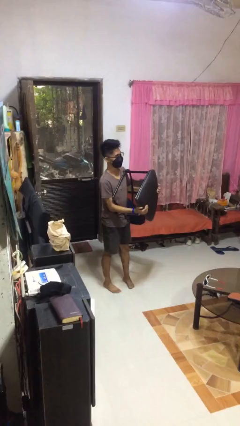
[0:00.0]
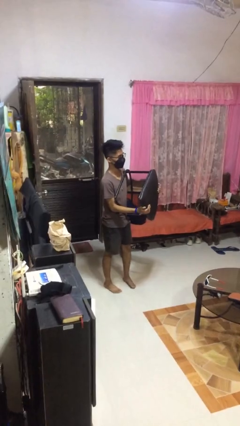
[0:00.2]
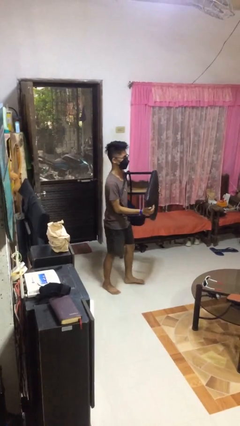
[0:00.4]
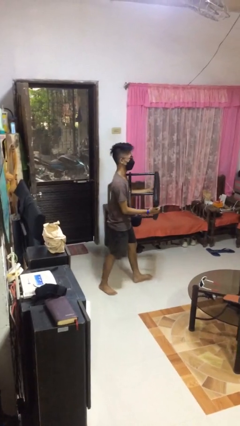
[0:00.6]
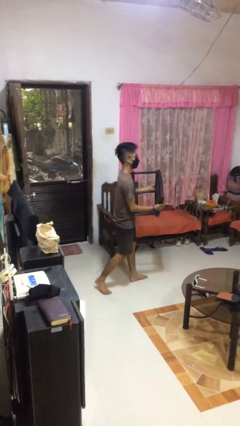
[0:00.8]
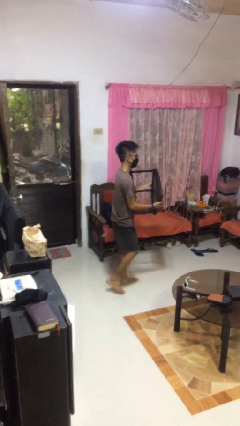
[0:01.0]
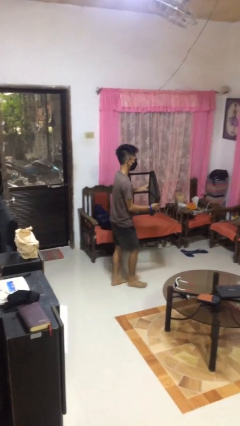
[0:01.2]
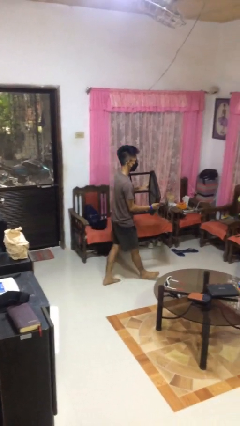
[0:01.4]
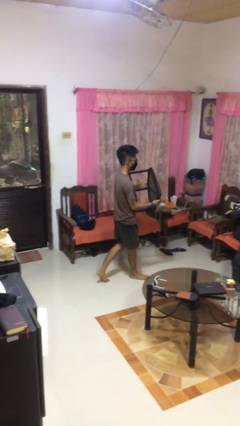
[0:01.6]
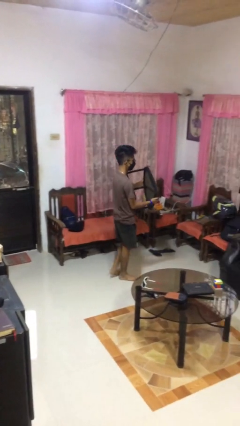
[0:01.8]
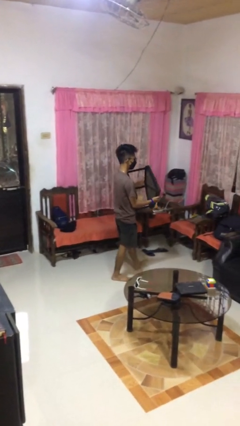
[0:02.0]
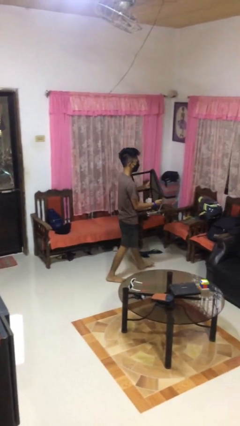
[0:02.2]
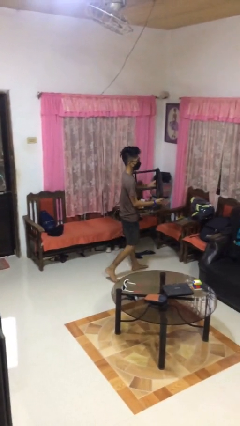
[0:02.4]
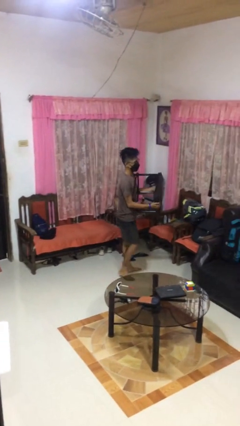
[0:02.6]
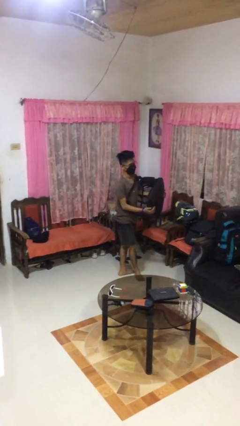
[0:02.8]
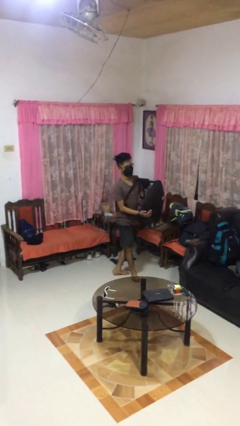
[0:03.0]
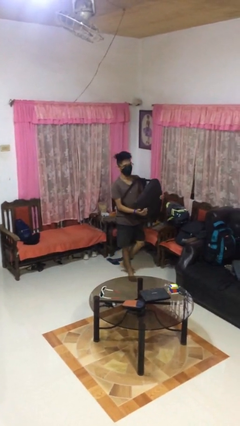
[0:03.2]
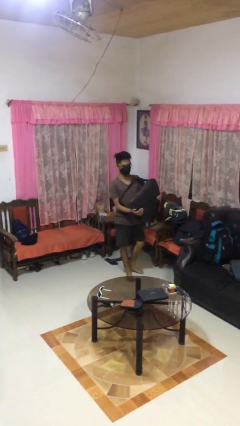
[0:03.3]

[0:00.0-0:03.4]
person carries furniture

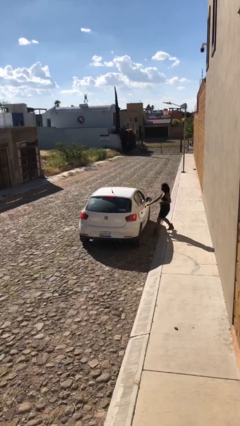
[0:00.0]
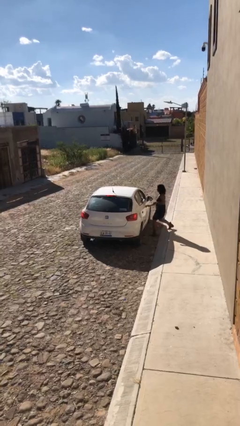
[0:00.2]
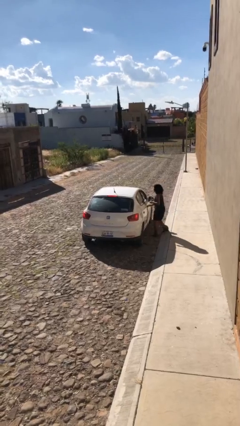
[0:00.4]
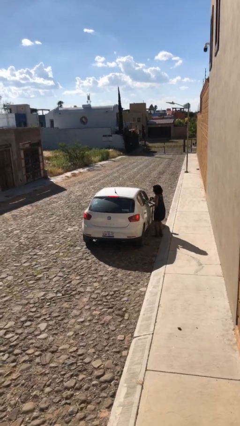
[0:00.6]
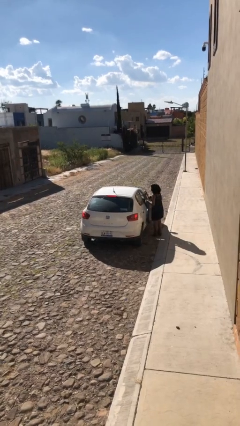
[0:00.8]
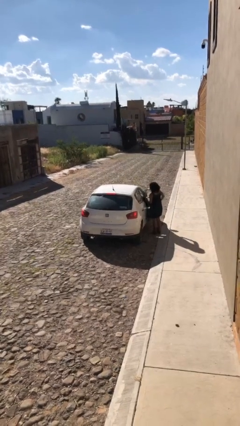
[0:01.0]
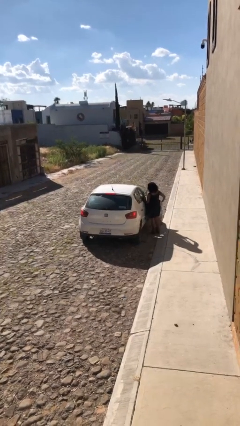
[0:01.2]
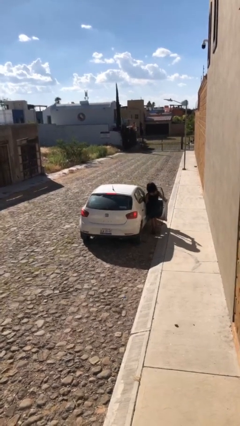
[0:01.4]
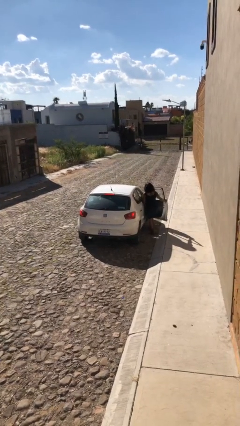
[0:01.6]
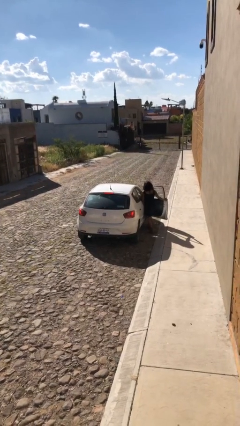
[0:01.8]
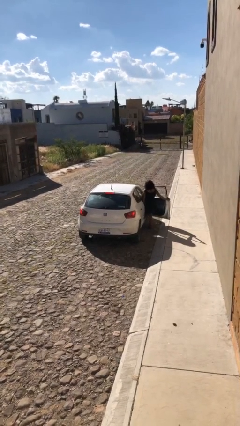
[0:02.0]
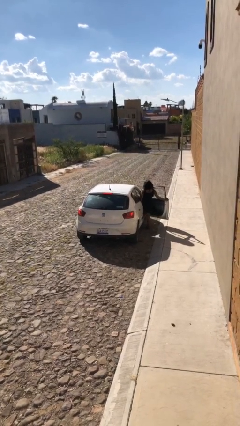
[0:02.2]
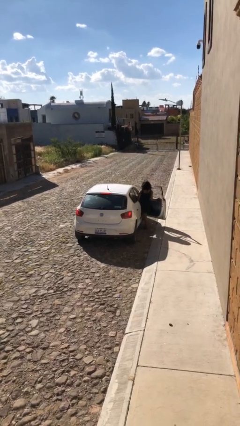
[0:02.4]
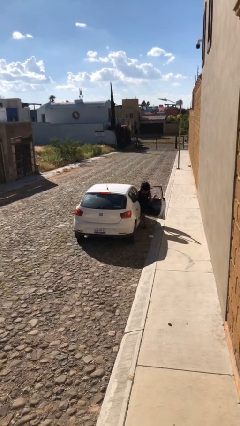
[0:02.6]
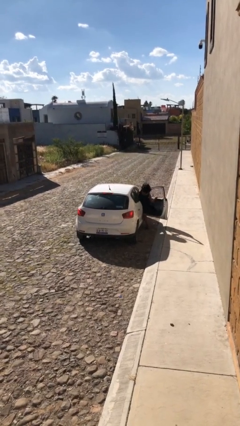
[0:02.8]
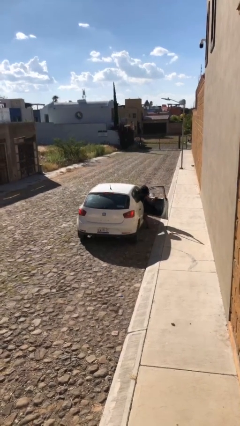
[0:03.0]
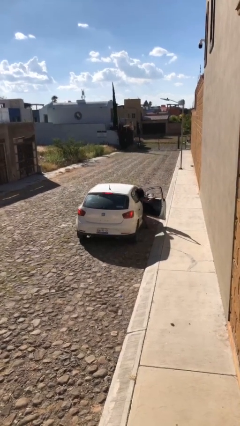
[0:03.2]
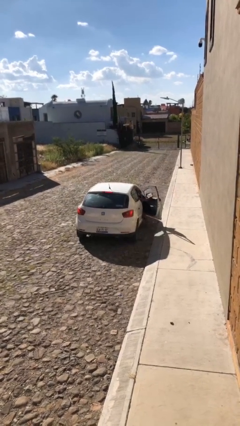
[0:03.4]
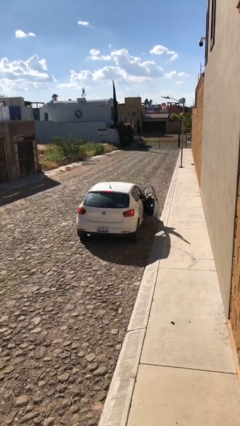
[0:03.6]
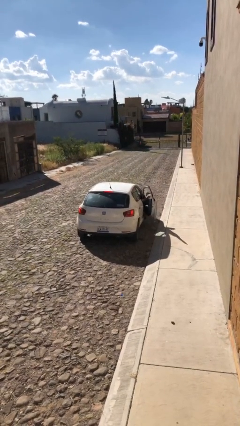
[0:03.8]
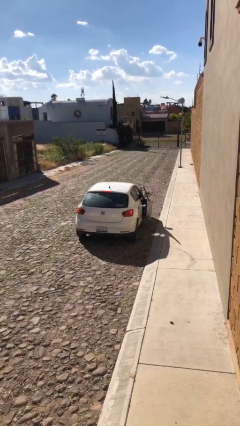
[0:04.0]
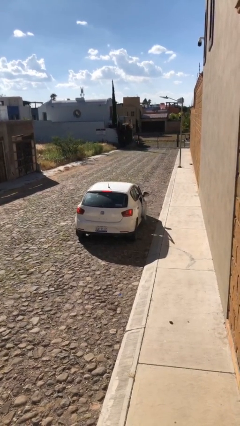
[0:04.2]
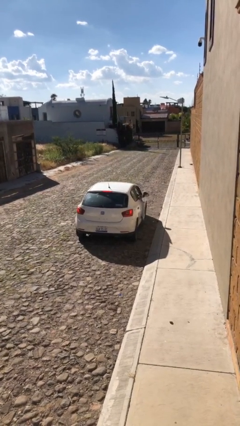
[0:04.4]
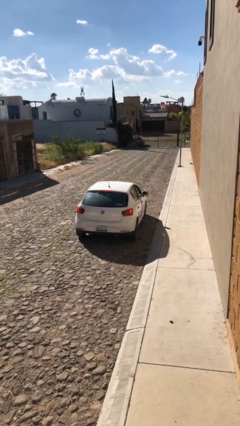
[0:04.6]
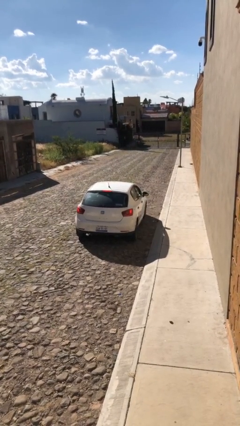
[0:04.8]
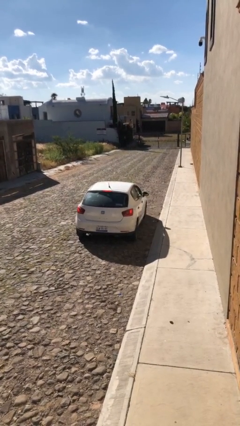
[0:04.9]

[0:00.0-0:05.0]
car picks up person

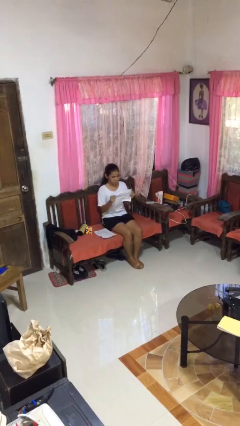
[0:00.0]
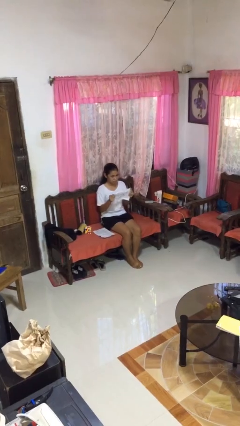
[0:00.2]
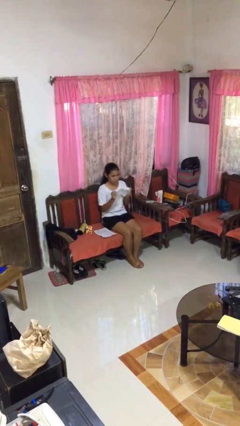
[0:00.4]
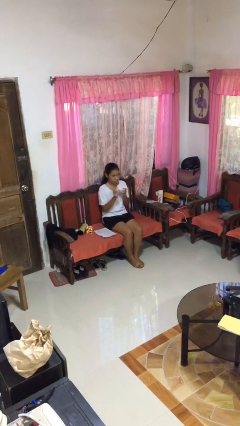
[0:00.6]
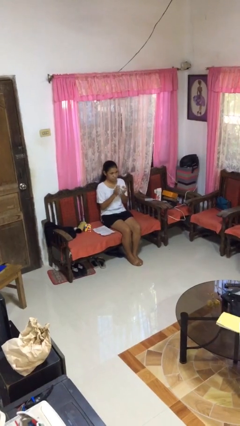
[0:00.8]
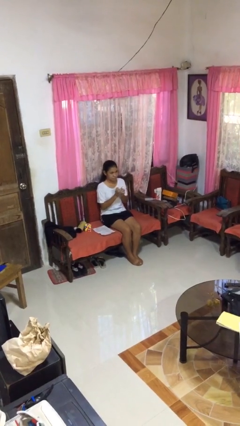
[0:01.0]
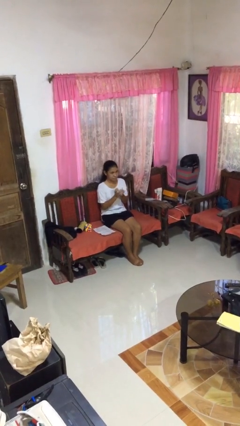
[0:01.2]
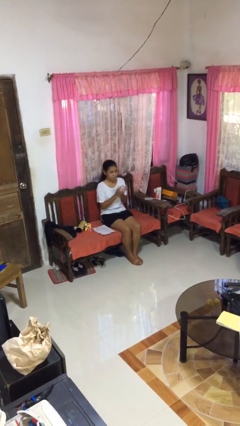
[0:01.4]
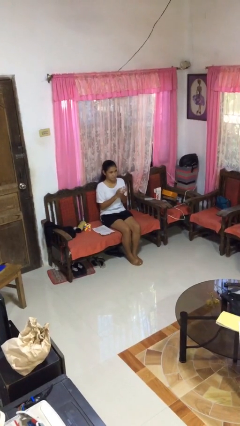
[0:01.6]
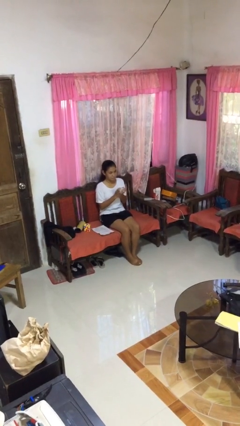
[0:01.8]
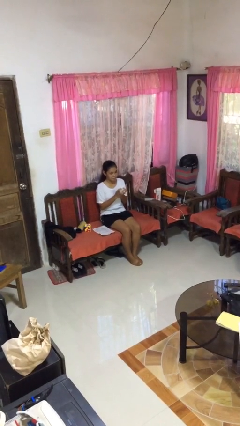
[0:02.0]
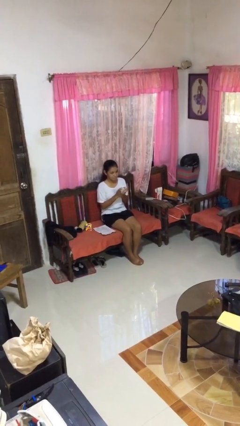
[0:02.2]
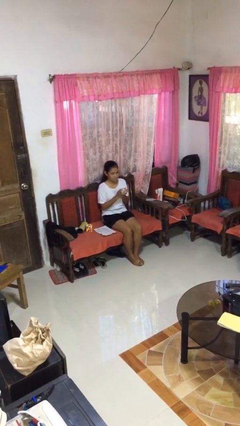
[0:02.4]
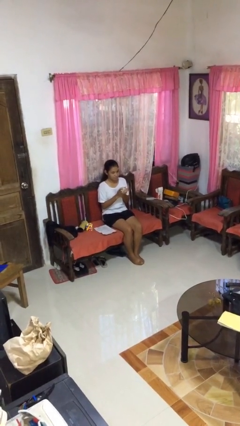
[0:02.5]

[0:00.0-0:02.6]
person crumples paper

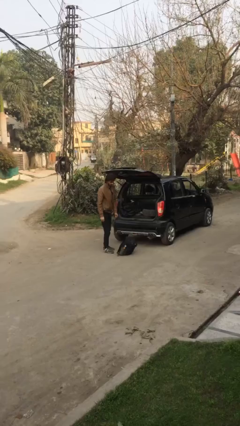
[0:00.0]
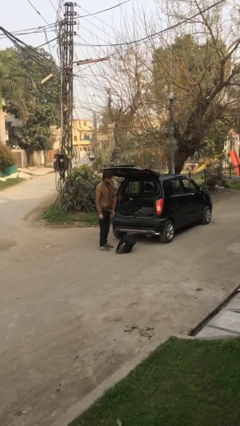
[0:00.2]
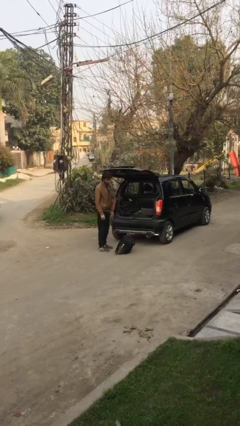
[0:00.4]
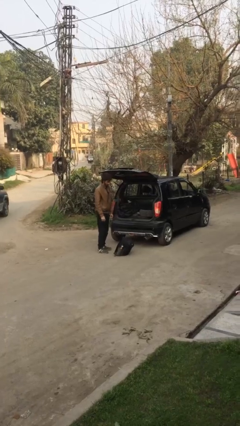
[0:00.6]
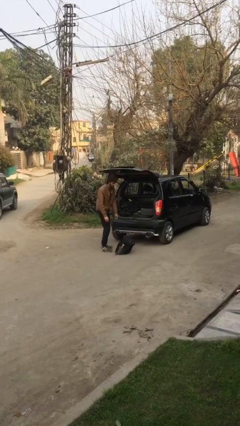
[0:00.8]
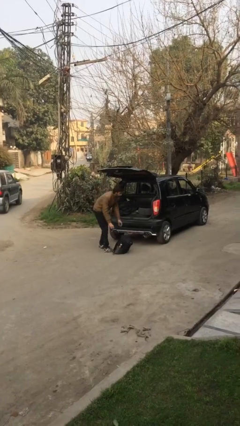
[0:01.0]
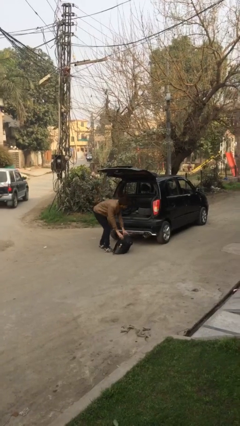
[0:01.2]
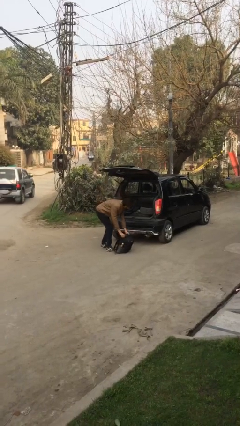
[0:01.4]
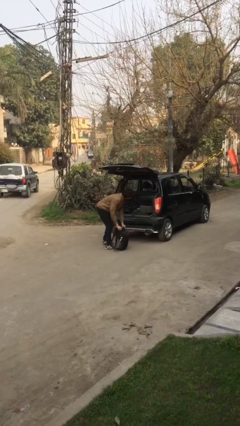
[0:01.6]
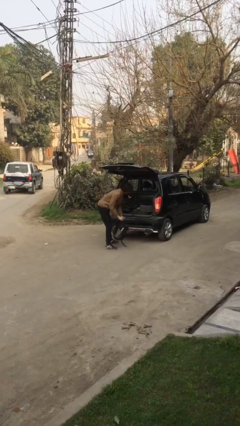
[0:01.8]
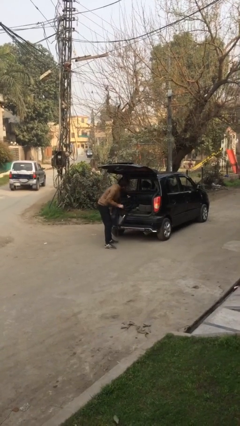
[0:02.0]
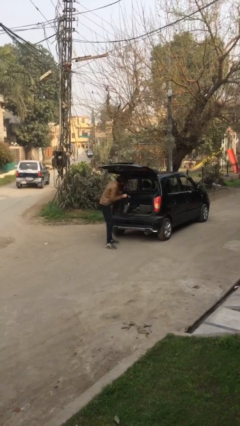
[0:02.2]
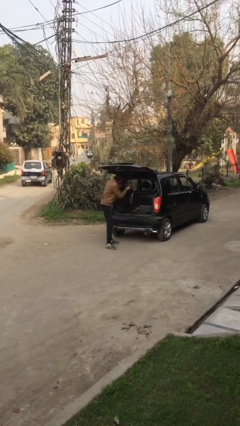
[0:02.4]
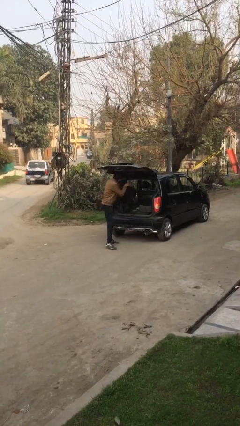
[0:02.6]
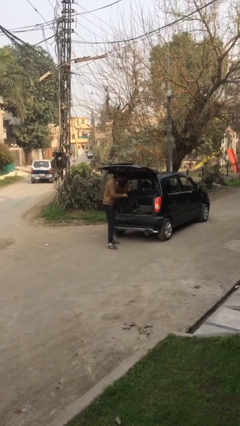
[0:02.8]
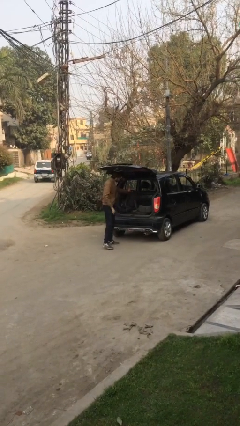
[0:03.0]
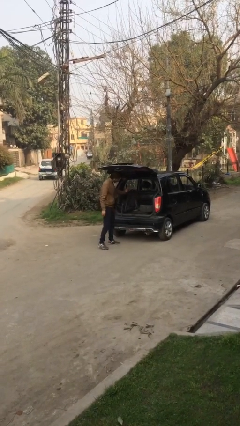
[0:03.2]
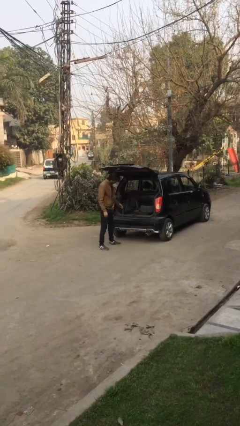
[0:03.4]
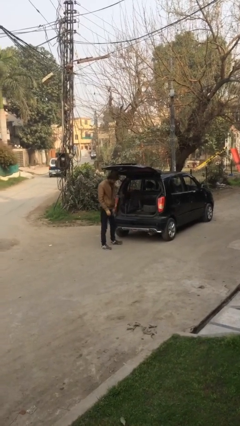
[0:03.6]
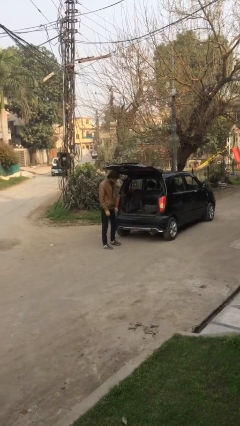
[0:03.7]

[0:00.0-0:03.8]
person loads car

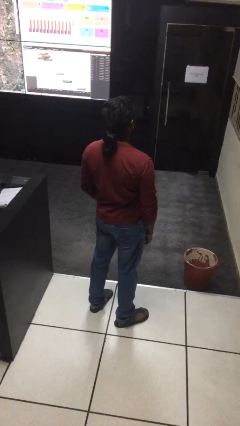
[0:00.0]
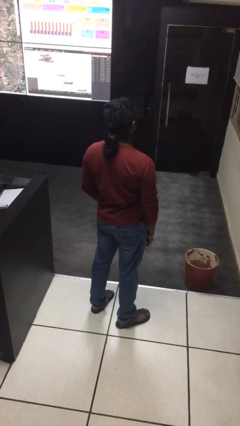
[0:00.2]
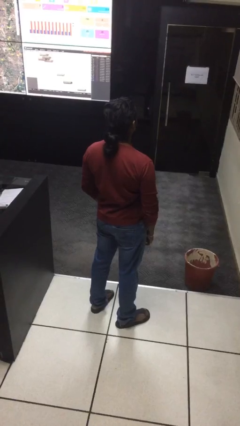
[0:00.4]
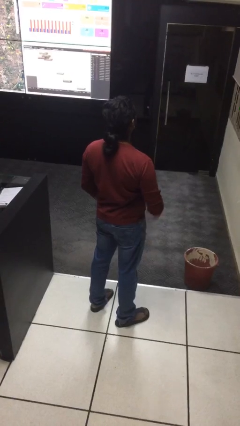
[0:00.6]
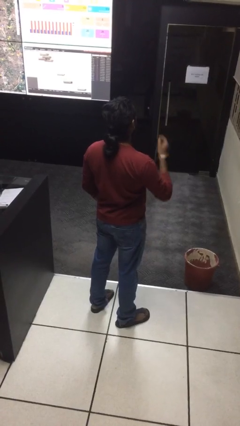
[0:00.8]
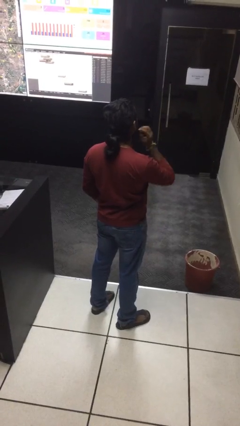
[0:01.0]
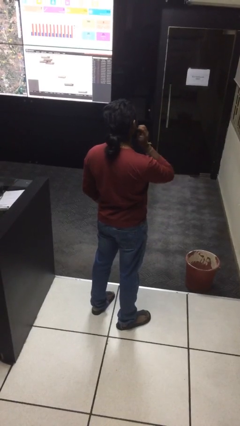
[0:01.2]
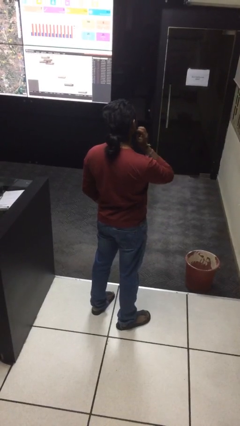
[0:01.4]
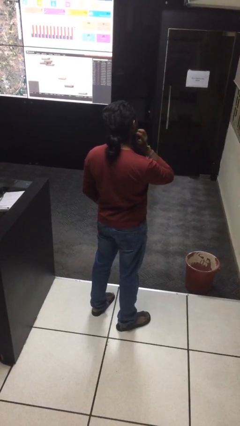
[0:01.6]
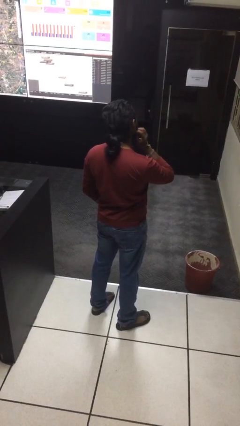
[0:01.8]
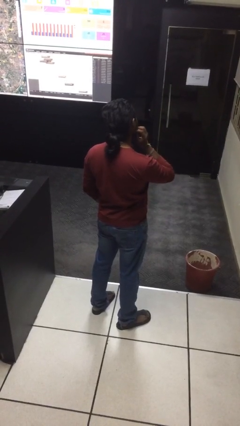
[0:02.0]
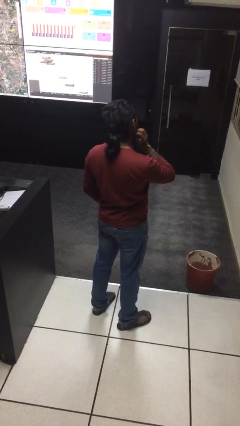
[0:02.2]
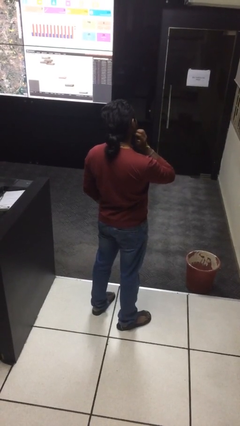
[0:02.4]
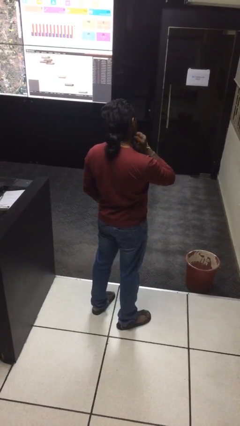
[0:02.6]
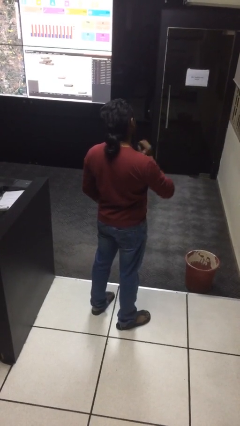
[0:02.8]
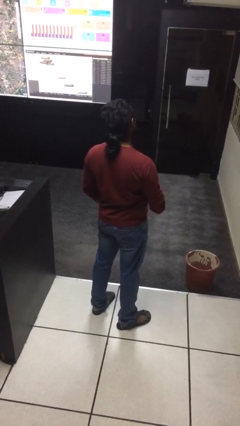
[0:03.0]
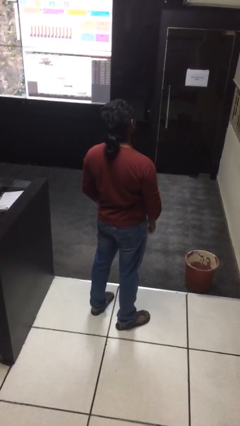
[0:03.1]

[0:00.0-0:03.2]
person scratches face
